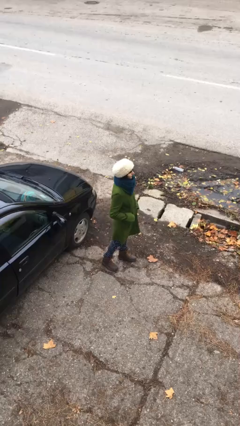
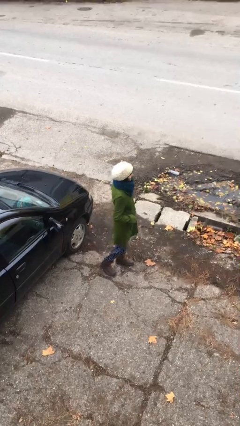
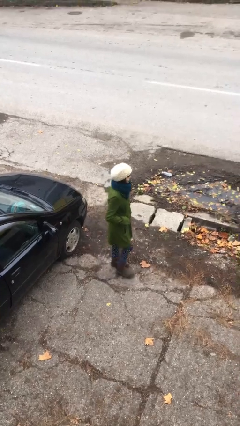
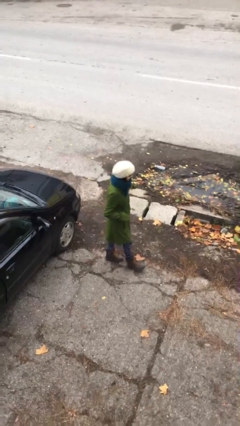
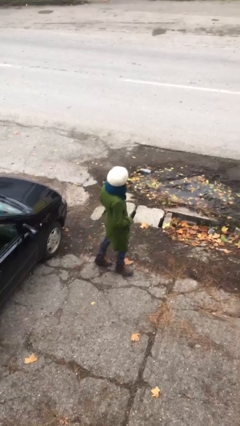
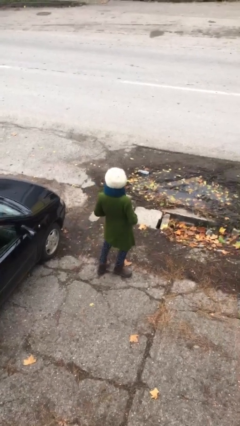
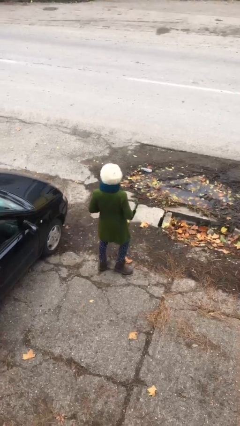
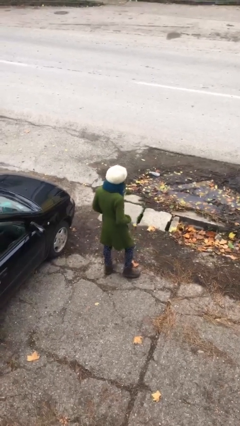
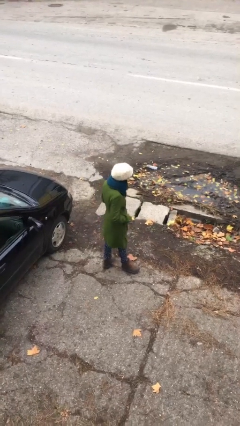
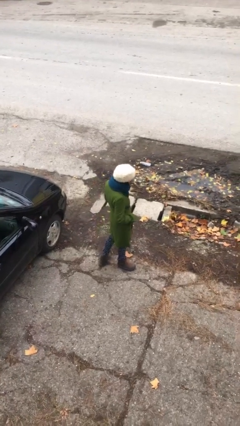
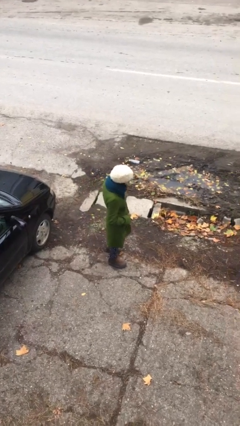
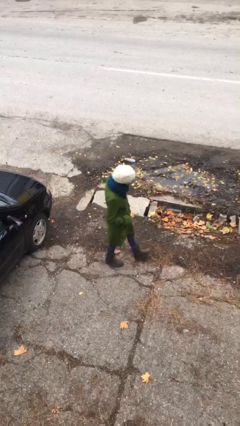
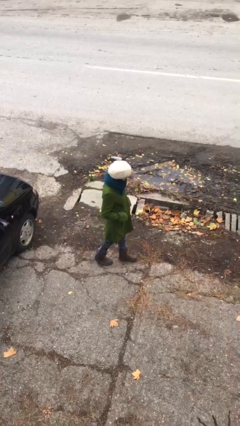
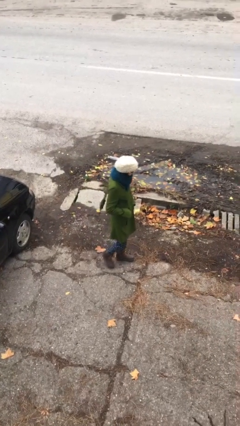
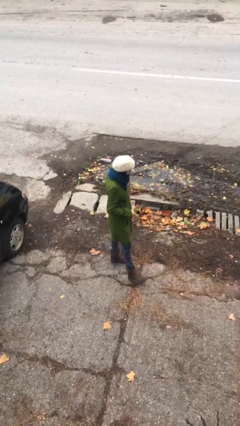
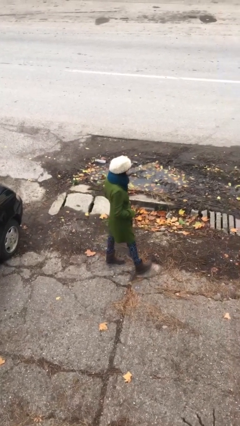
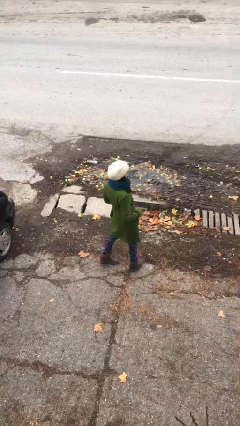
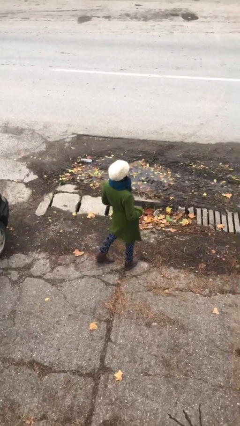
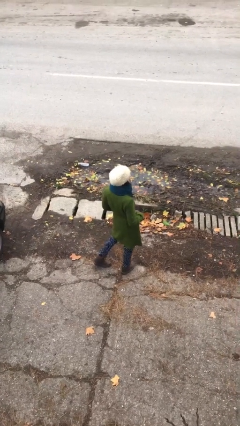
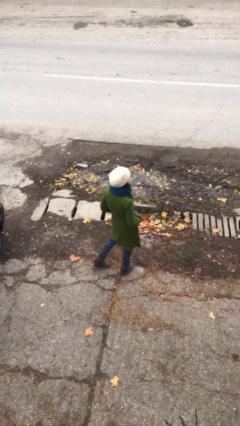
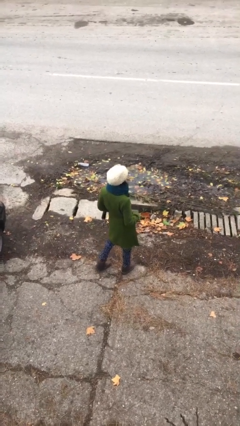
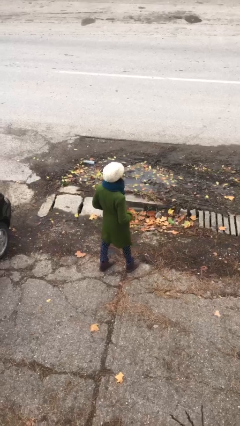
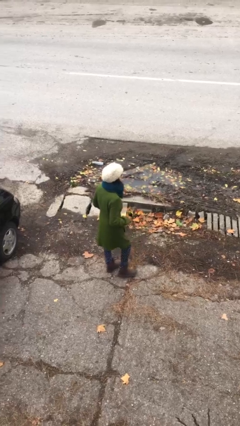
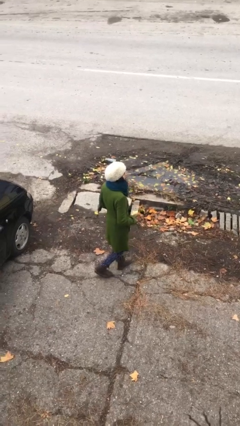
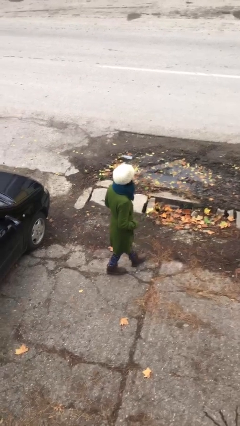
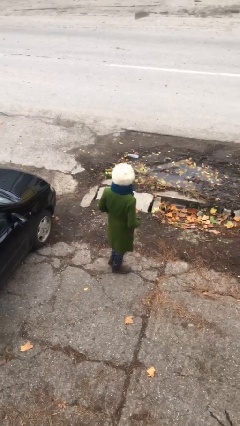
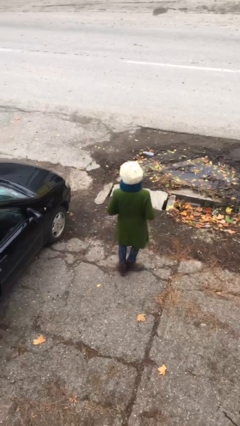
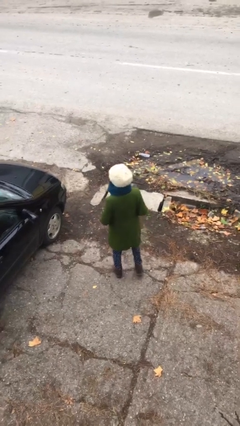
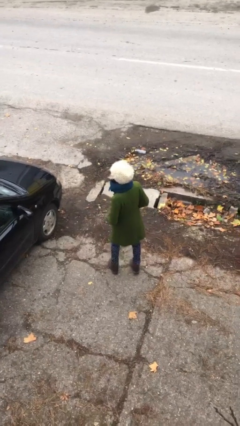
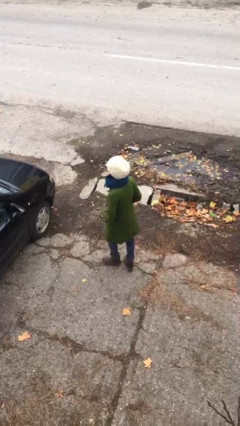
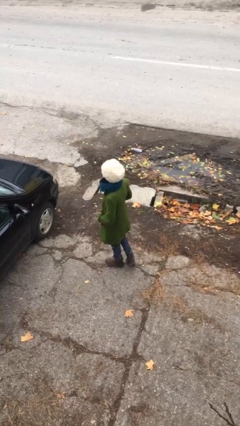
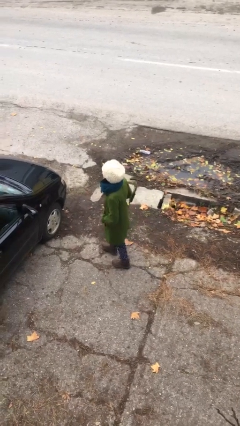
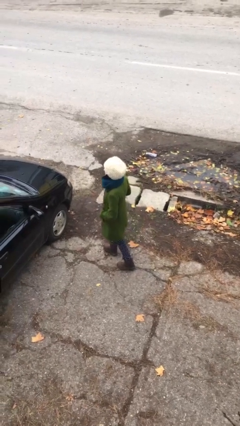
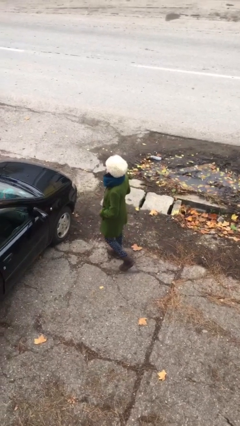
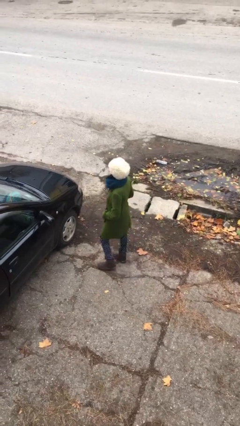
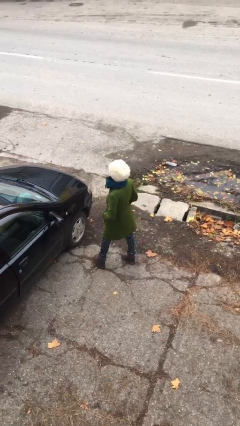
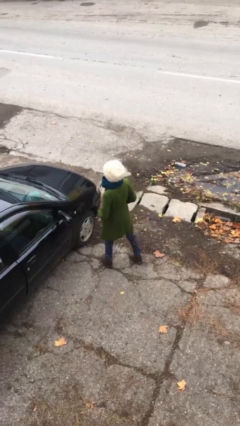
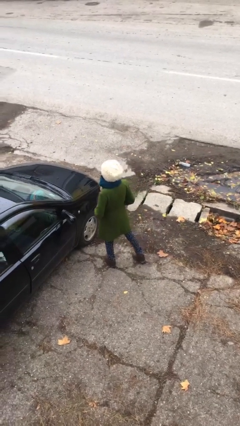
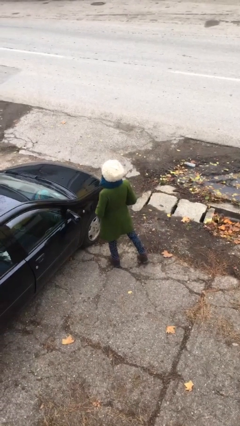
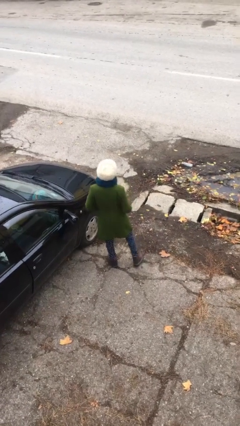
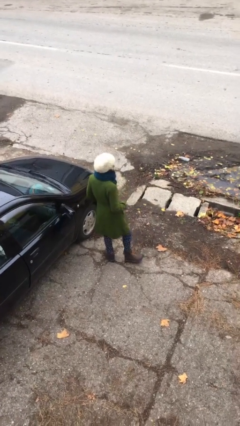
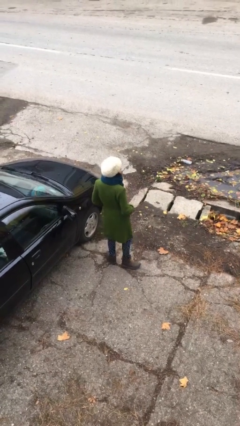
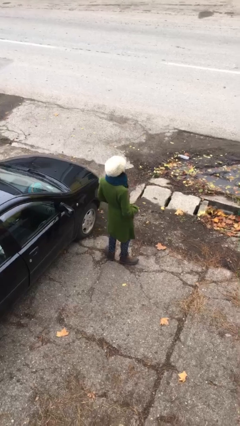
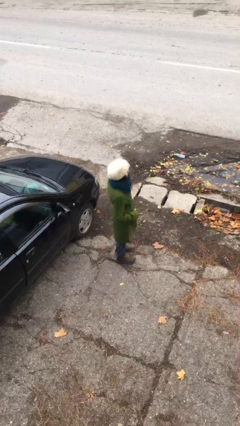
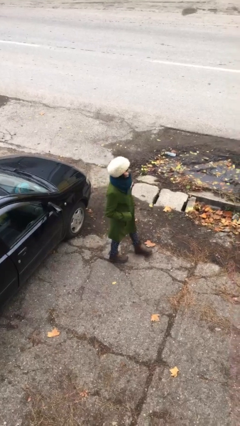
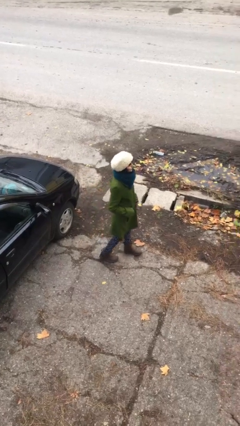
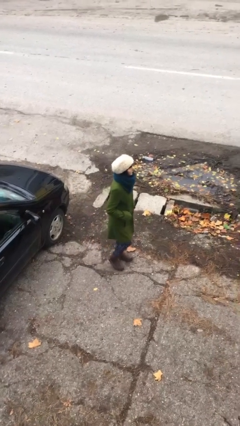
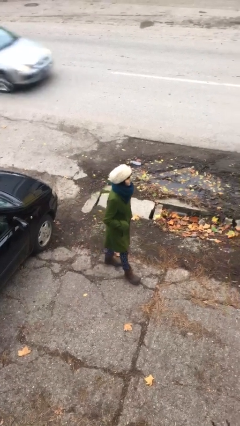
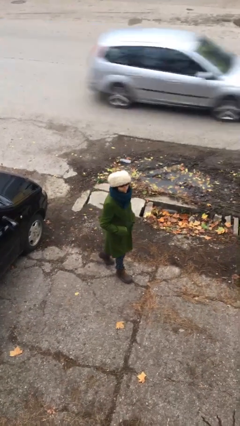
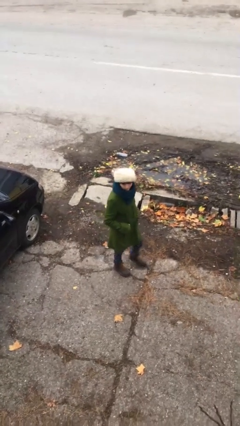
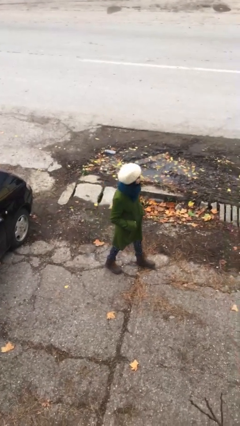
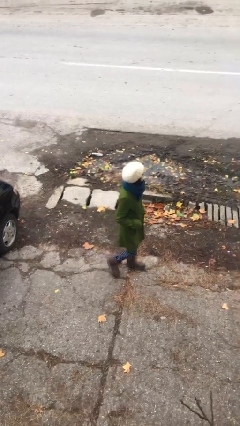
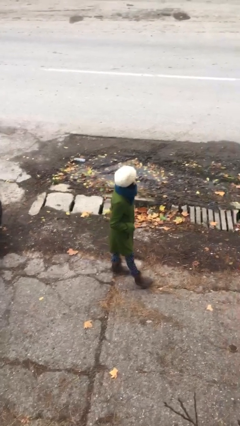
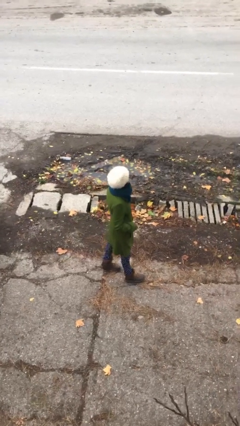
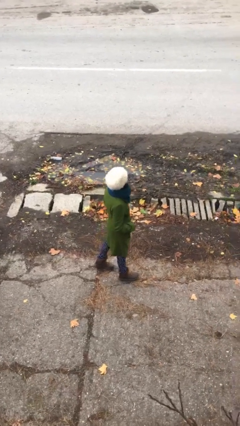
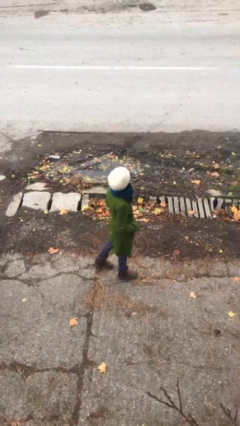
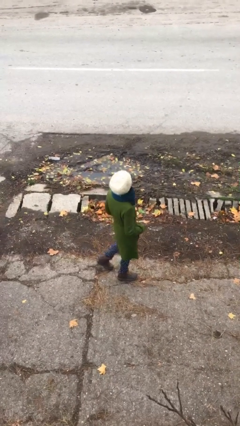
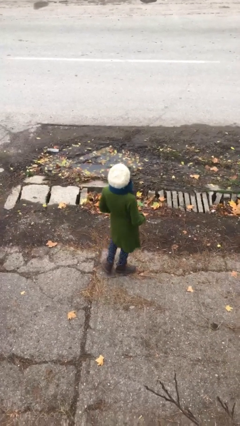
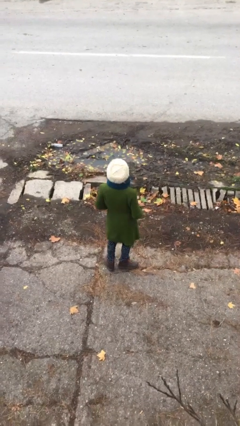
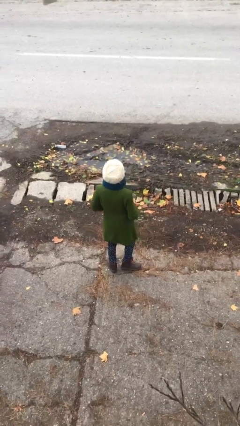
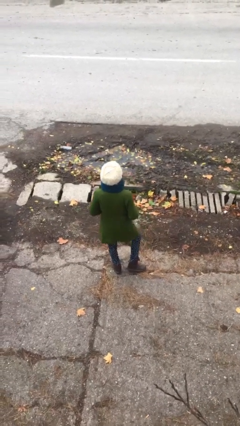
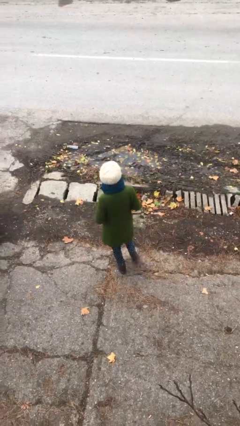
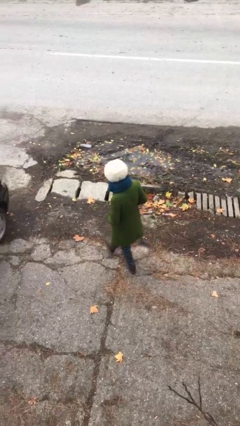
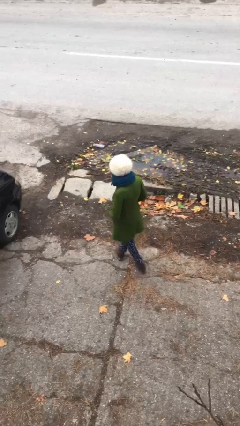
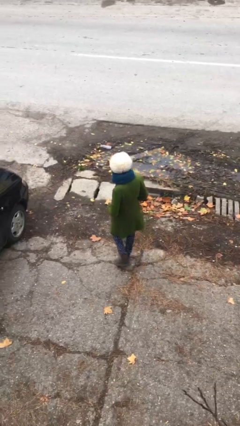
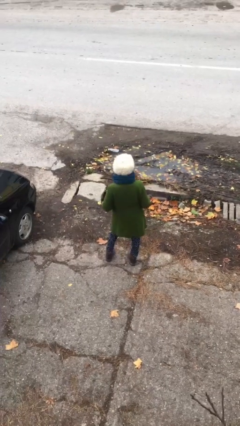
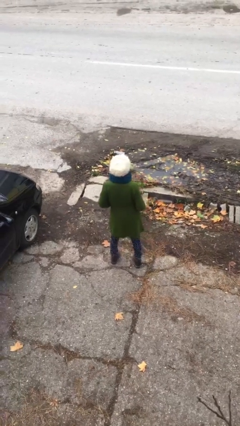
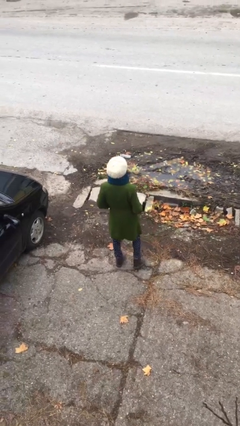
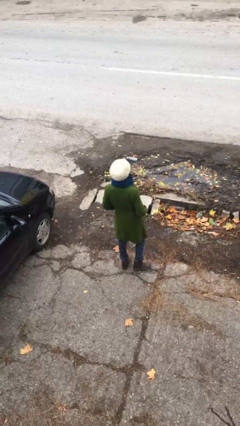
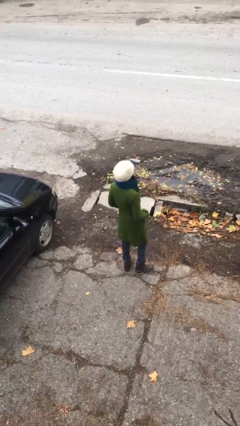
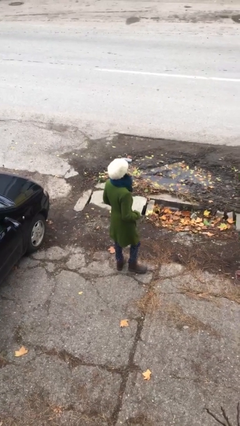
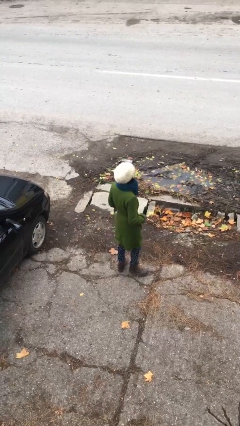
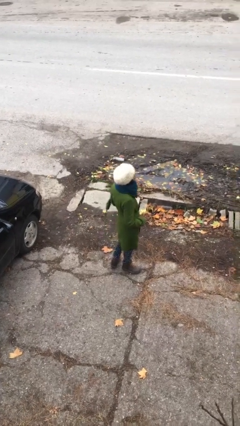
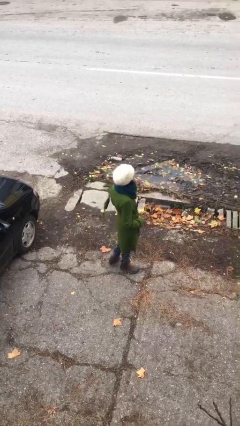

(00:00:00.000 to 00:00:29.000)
person walks

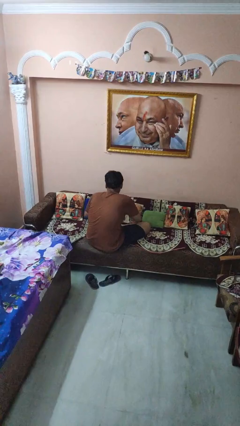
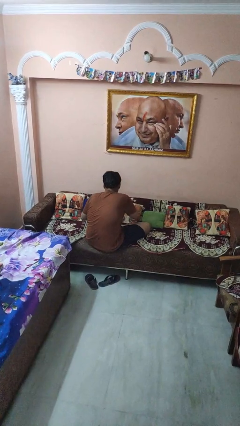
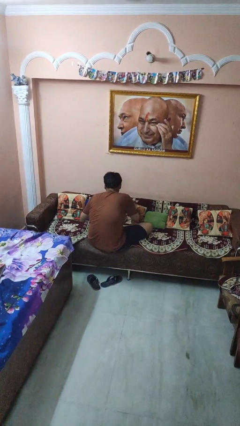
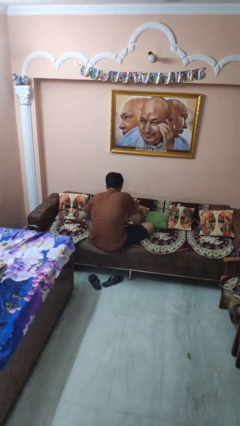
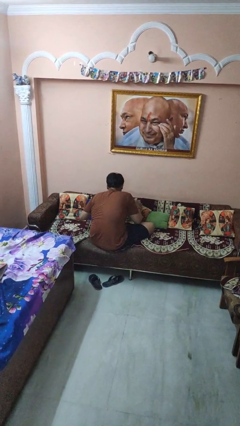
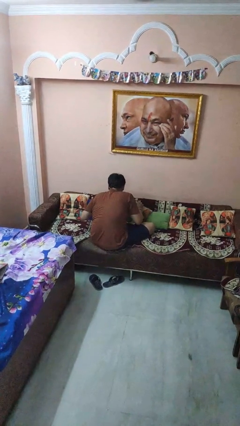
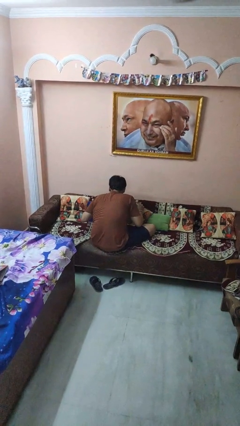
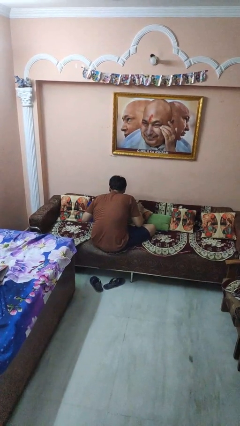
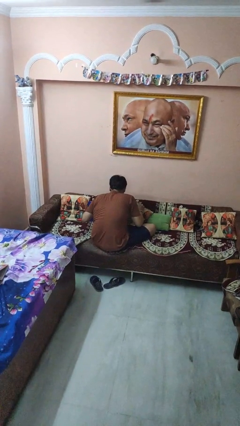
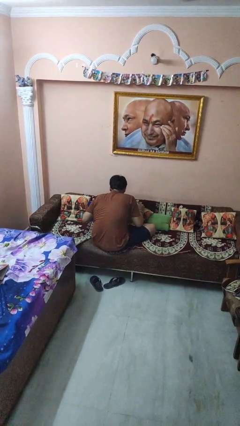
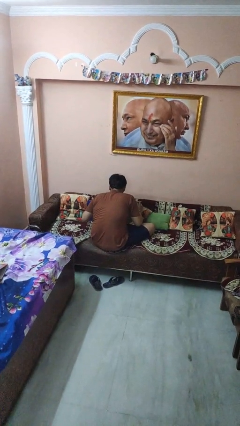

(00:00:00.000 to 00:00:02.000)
person searches in couch

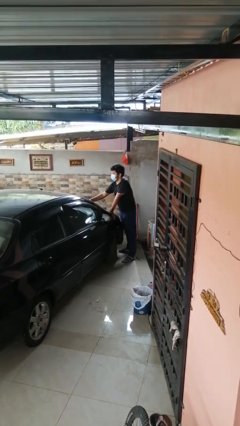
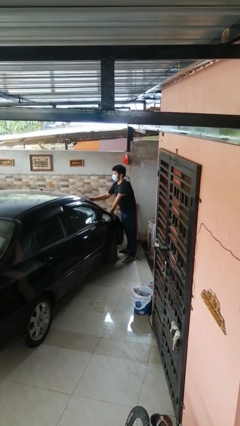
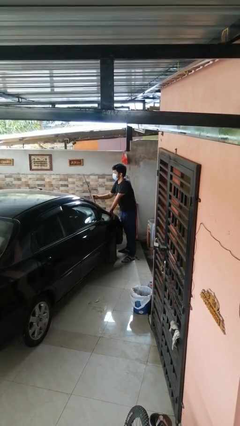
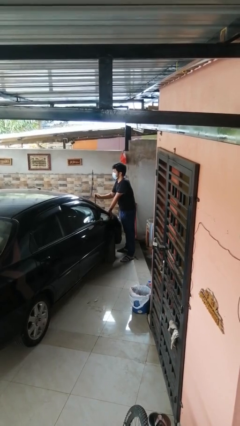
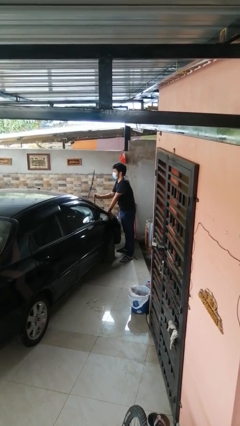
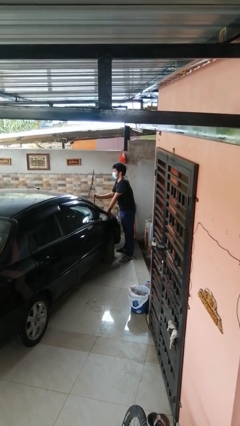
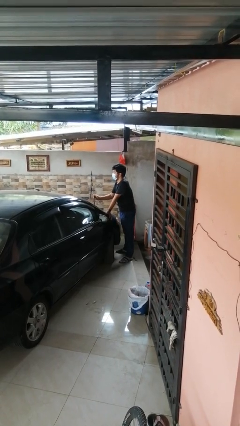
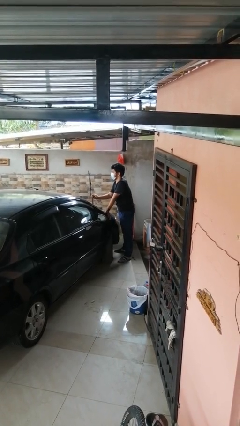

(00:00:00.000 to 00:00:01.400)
person flips up car wipers
